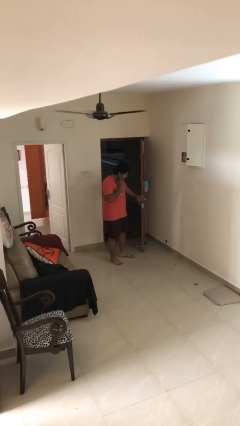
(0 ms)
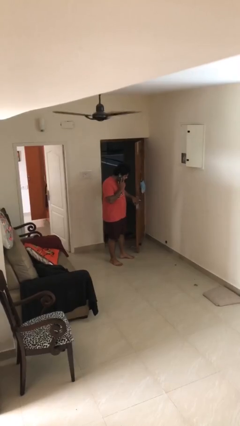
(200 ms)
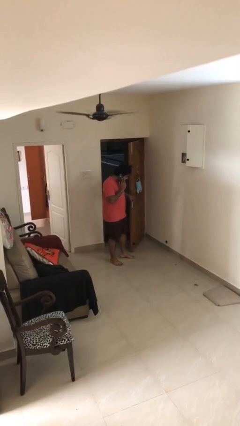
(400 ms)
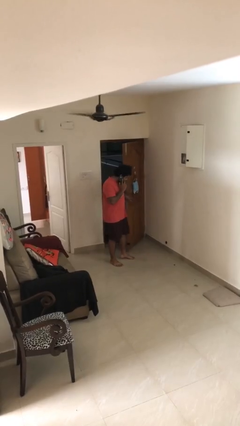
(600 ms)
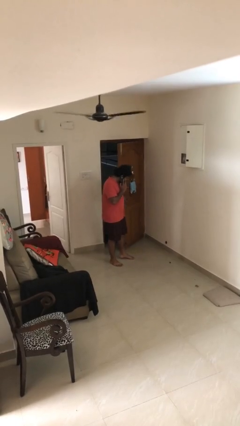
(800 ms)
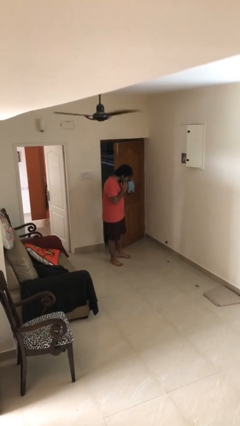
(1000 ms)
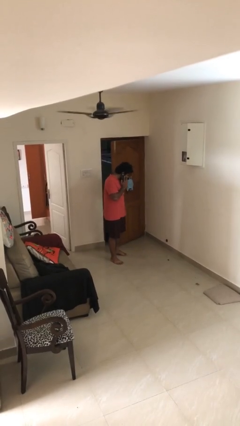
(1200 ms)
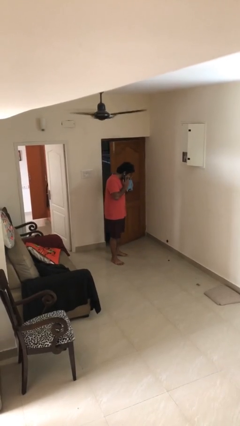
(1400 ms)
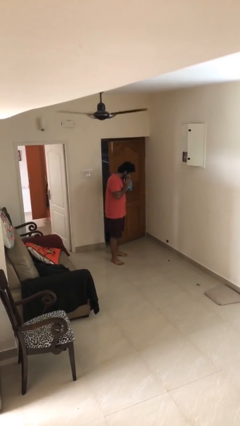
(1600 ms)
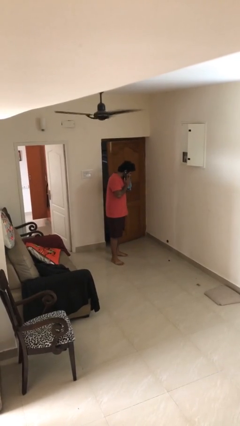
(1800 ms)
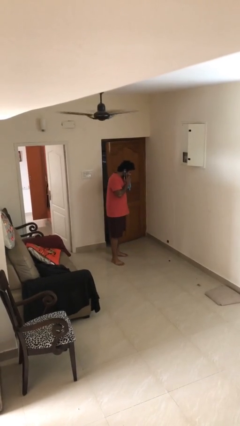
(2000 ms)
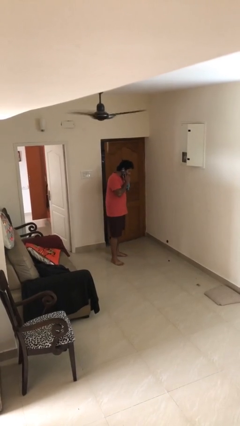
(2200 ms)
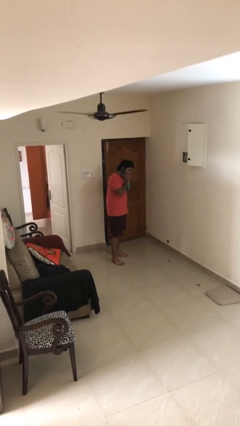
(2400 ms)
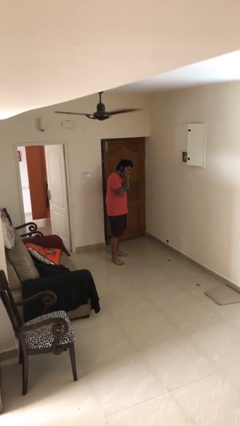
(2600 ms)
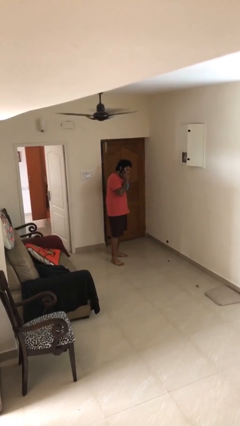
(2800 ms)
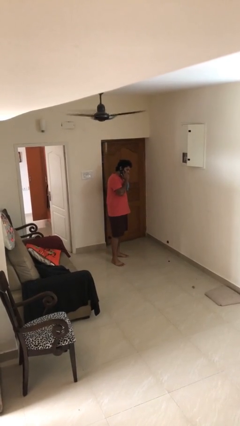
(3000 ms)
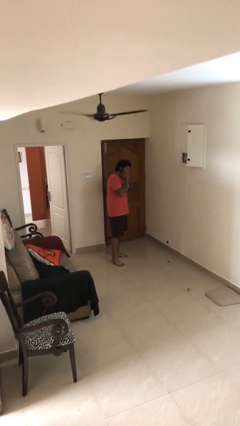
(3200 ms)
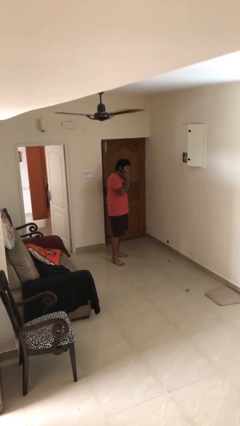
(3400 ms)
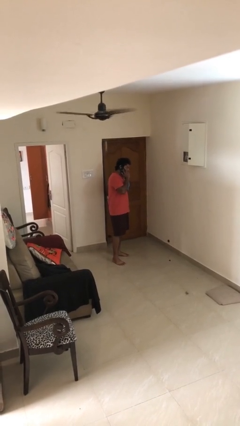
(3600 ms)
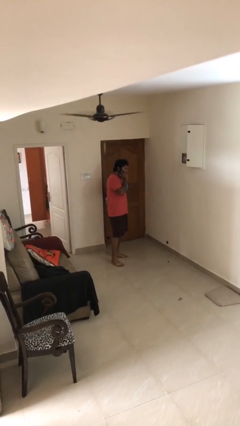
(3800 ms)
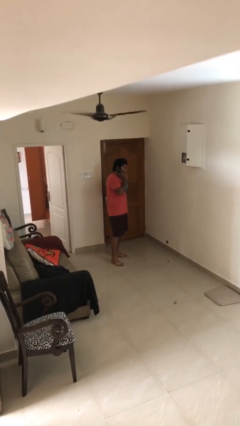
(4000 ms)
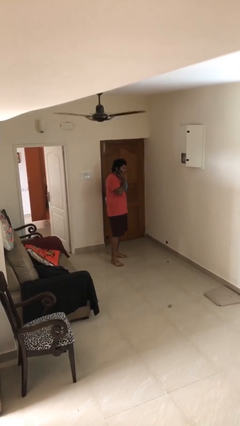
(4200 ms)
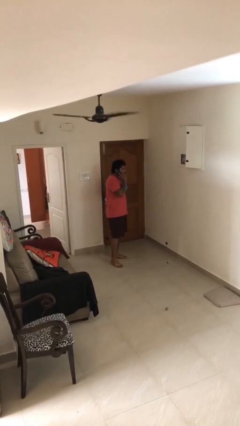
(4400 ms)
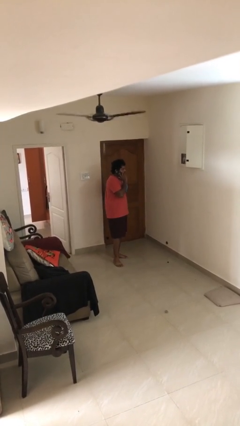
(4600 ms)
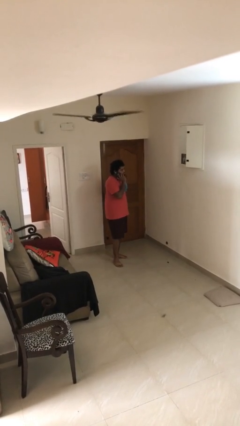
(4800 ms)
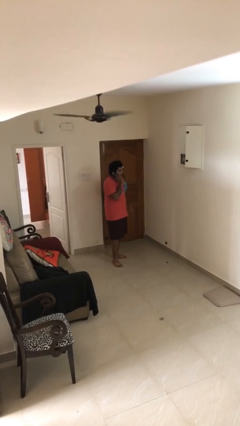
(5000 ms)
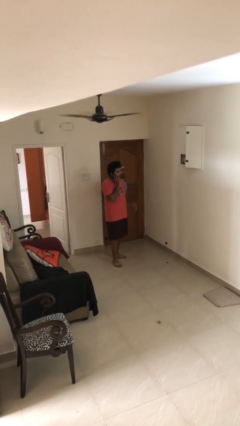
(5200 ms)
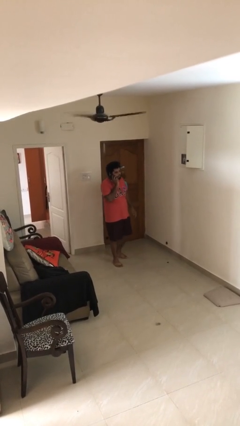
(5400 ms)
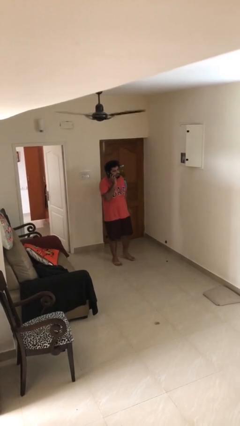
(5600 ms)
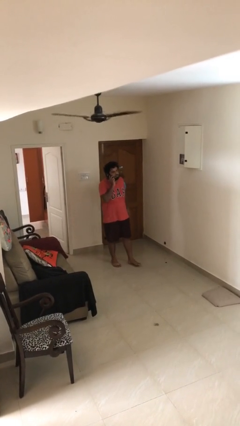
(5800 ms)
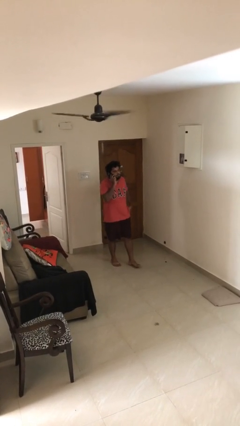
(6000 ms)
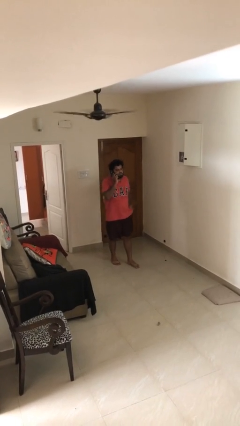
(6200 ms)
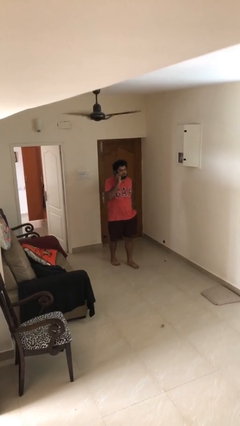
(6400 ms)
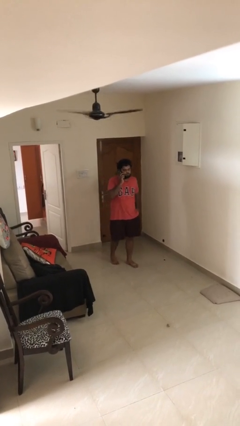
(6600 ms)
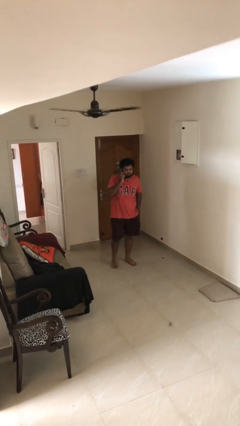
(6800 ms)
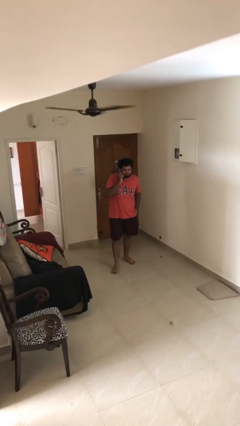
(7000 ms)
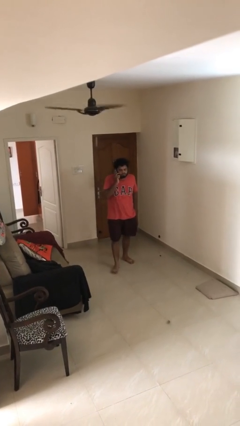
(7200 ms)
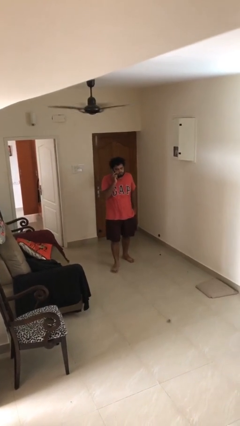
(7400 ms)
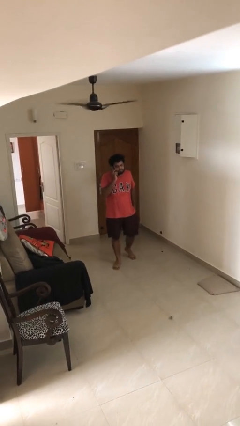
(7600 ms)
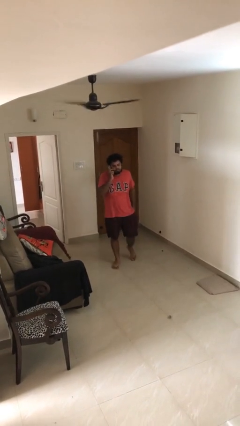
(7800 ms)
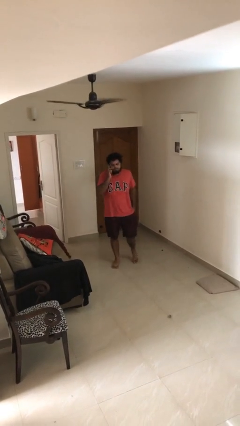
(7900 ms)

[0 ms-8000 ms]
person closes facility door

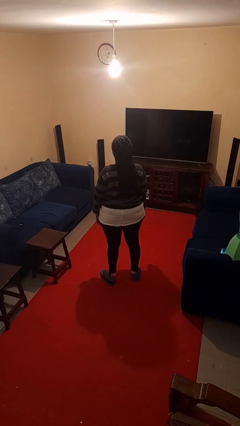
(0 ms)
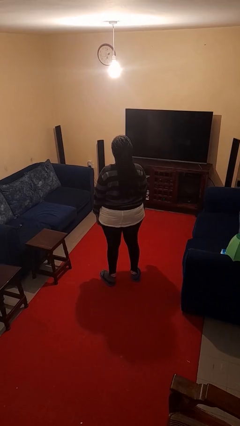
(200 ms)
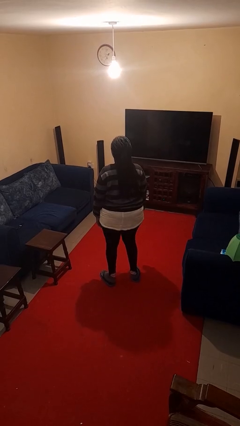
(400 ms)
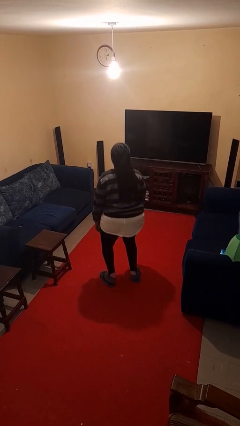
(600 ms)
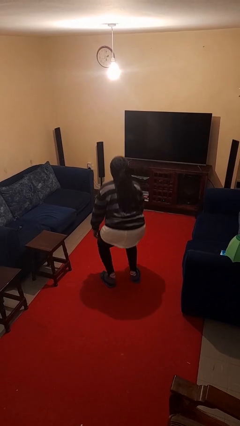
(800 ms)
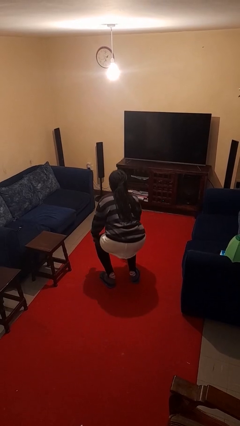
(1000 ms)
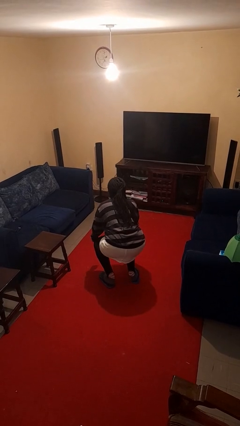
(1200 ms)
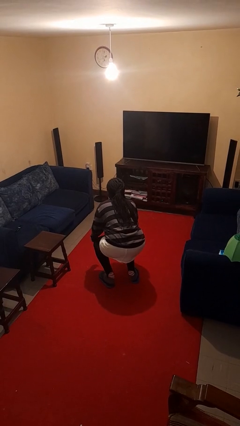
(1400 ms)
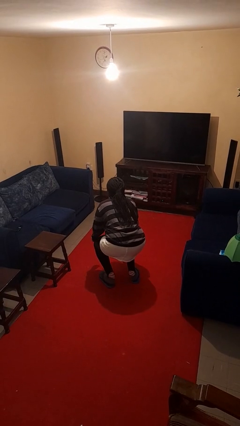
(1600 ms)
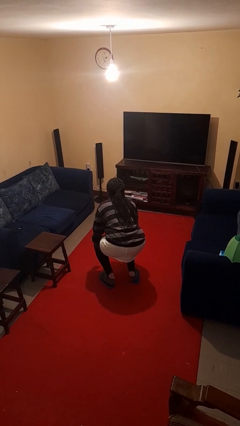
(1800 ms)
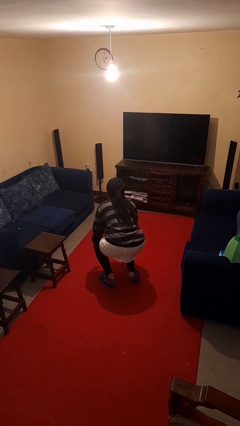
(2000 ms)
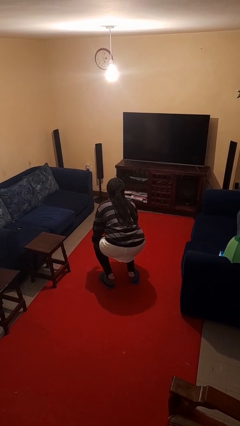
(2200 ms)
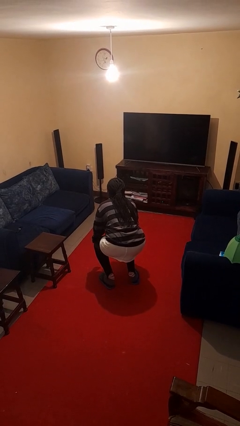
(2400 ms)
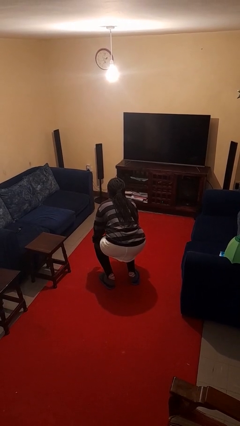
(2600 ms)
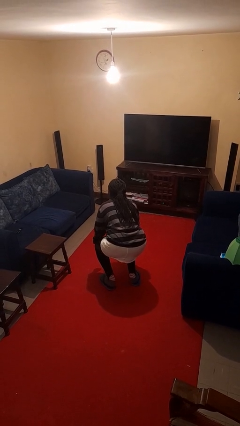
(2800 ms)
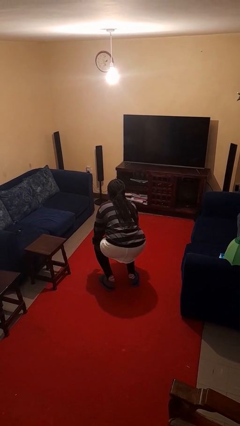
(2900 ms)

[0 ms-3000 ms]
person squats

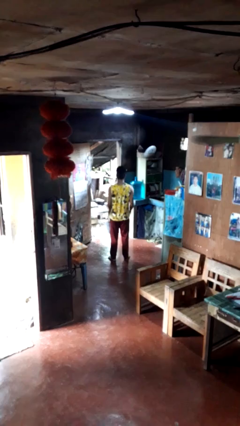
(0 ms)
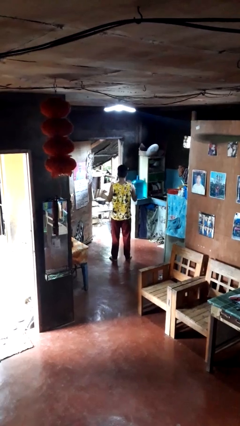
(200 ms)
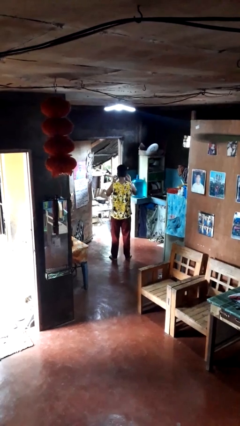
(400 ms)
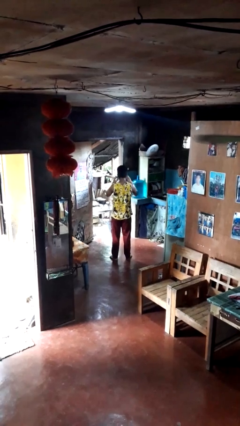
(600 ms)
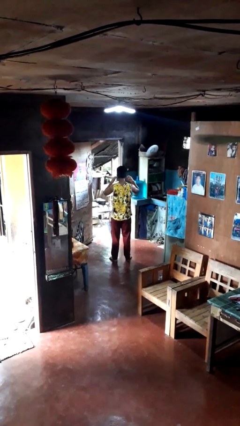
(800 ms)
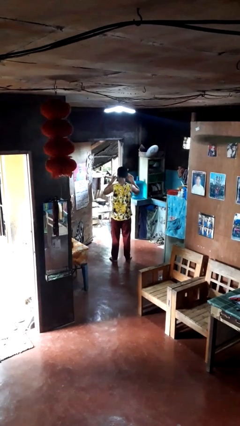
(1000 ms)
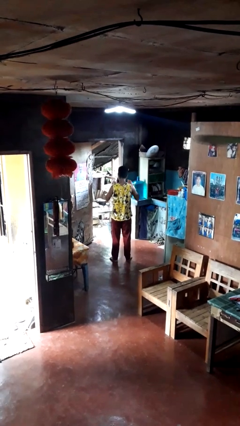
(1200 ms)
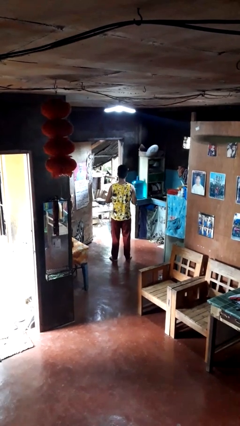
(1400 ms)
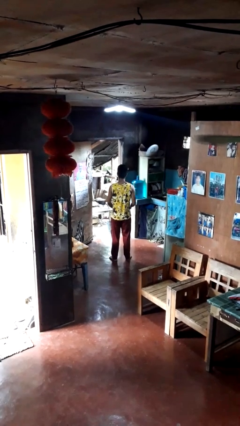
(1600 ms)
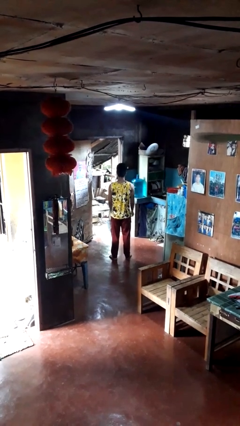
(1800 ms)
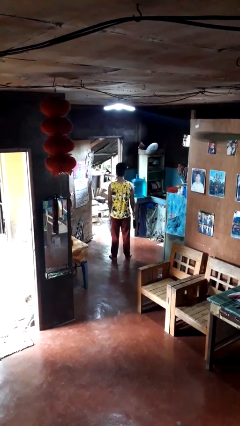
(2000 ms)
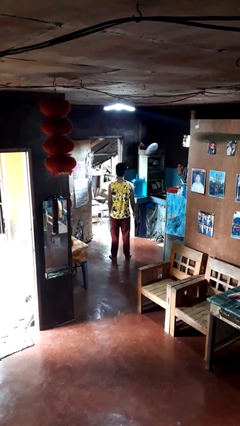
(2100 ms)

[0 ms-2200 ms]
person takes off facemask

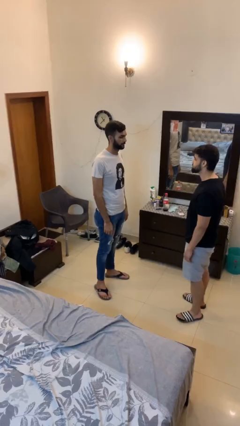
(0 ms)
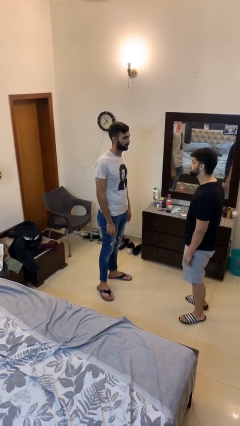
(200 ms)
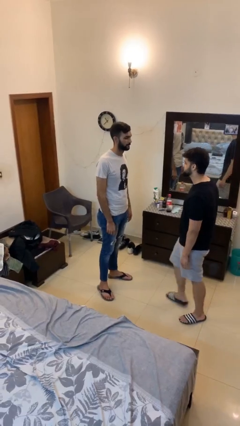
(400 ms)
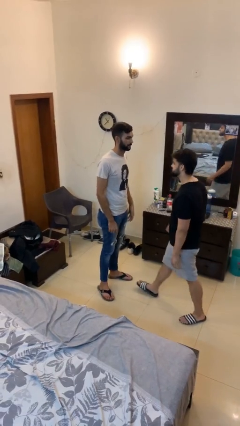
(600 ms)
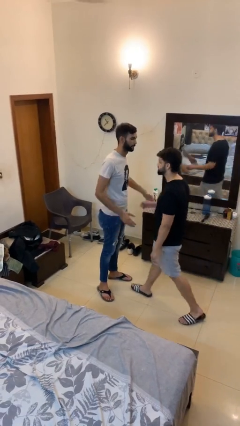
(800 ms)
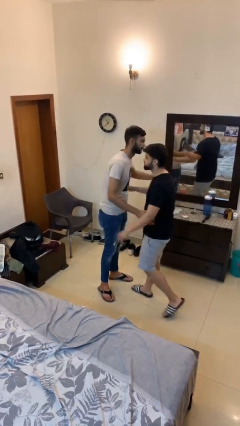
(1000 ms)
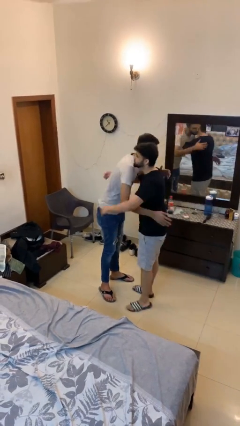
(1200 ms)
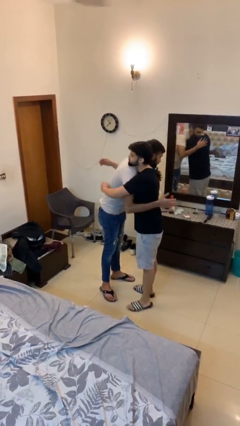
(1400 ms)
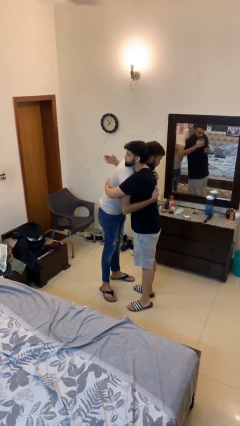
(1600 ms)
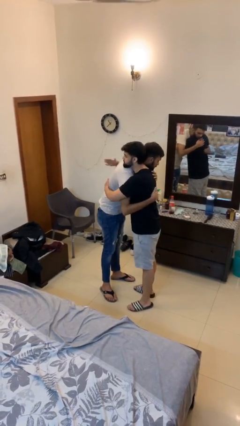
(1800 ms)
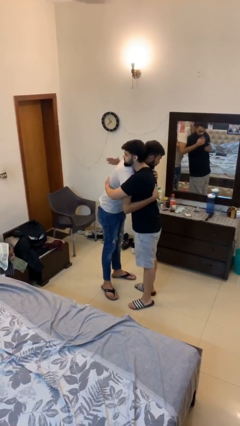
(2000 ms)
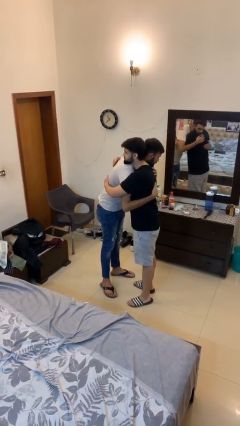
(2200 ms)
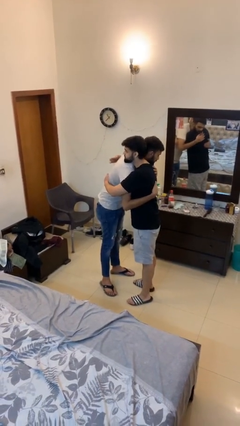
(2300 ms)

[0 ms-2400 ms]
person embraces person

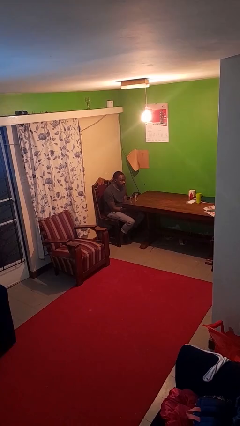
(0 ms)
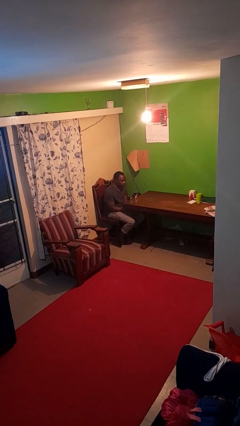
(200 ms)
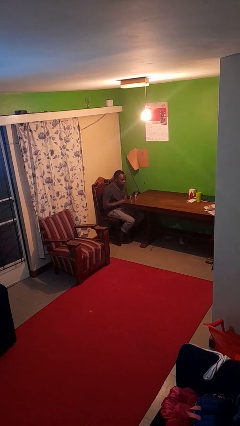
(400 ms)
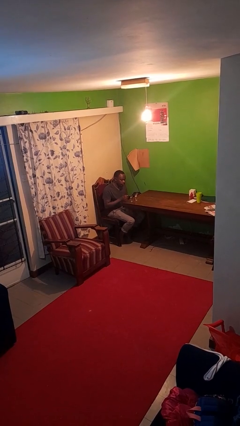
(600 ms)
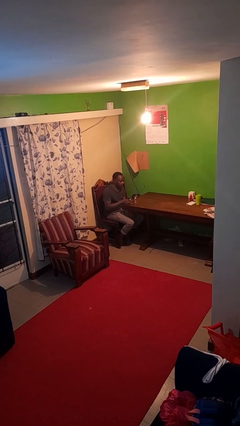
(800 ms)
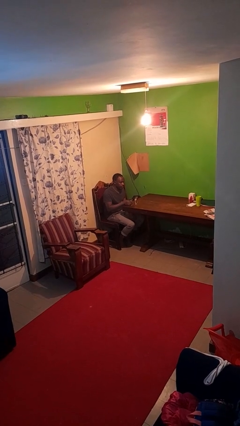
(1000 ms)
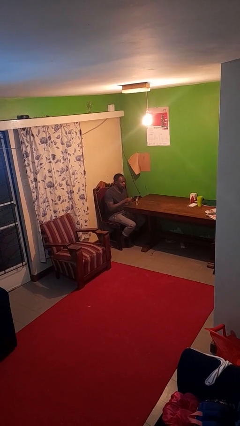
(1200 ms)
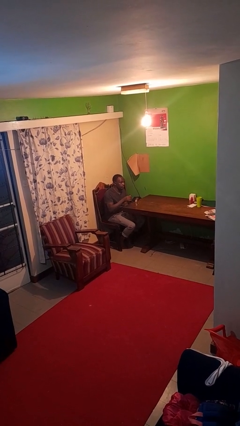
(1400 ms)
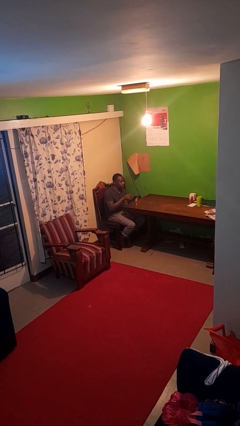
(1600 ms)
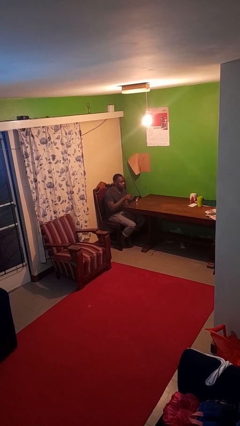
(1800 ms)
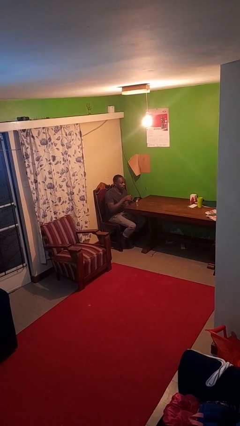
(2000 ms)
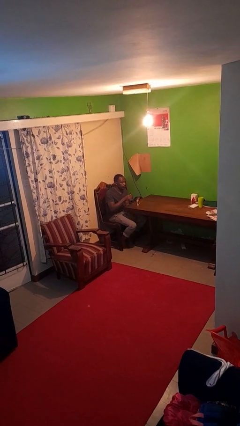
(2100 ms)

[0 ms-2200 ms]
person picks up object from table
